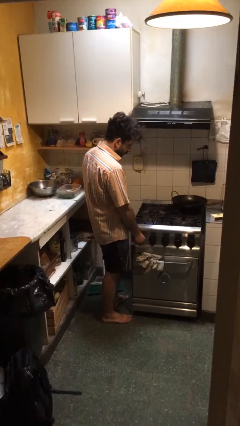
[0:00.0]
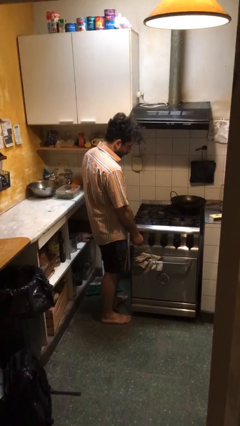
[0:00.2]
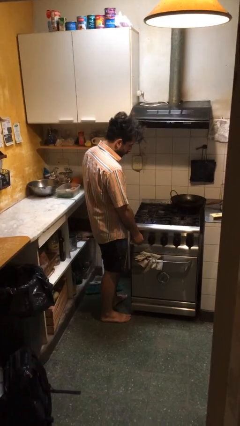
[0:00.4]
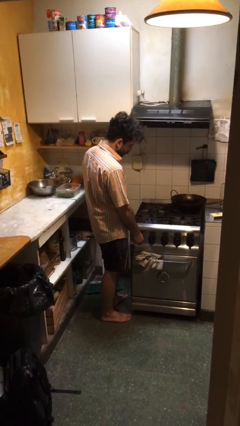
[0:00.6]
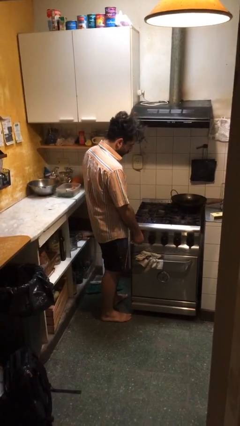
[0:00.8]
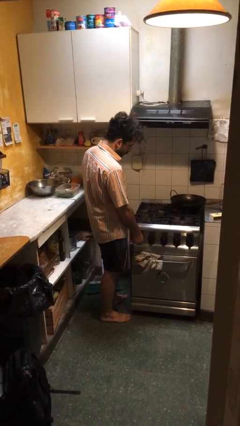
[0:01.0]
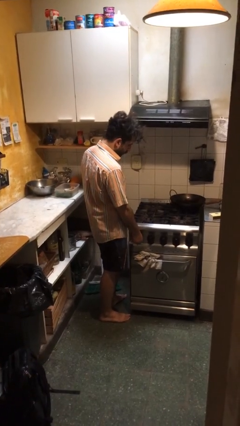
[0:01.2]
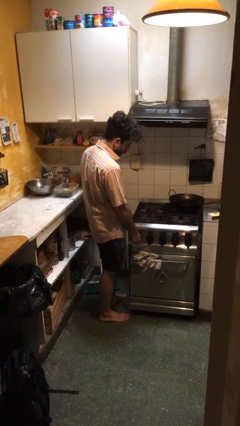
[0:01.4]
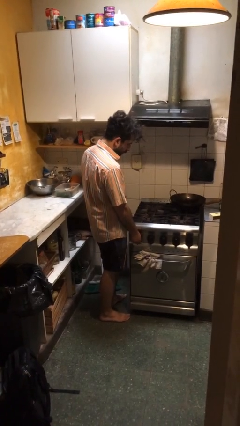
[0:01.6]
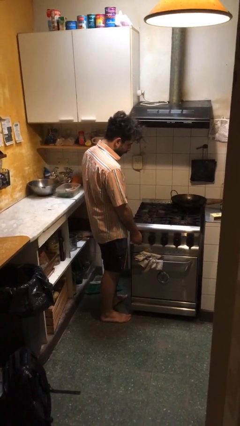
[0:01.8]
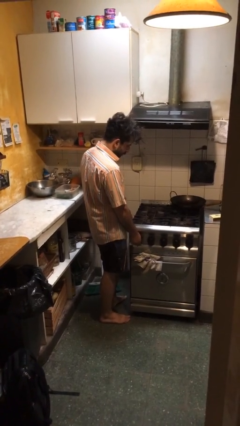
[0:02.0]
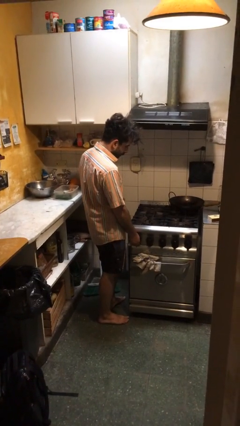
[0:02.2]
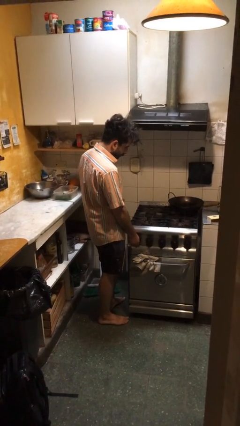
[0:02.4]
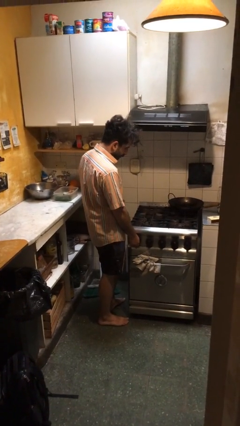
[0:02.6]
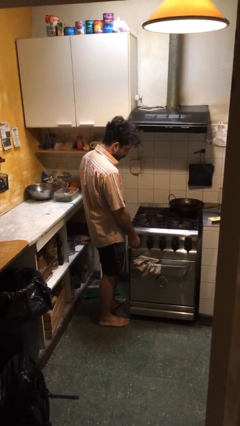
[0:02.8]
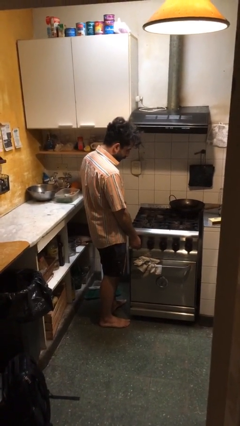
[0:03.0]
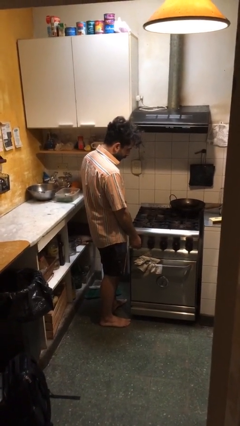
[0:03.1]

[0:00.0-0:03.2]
person turns off stovetop

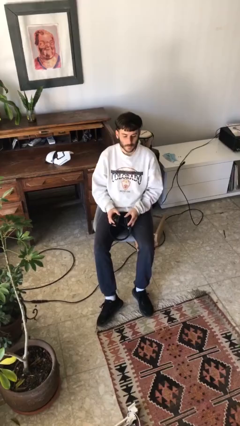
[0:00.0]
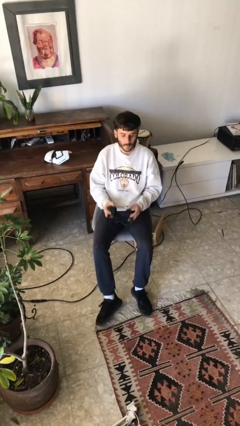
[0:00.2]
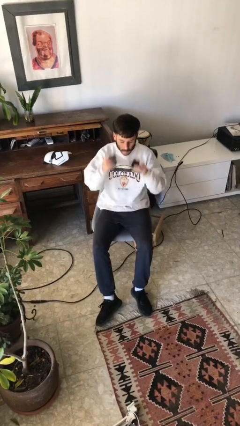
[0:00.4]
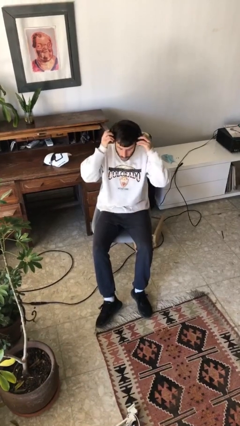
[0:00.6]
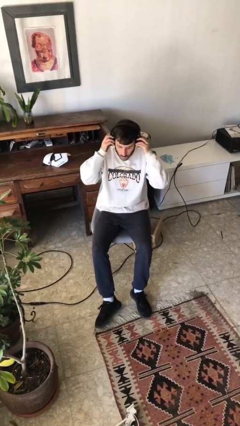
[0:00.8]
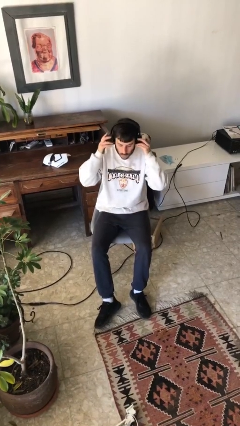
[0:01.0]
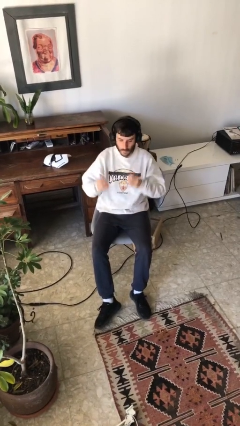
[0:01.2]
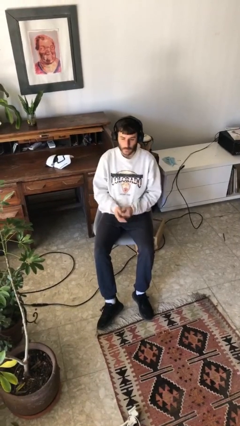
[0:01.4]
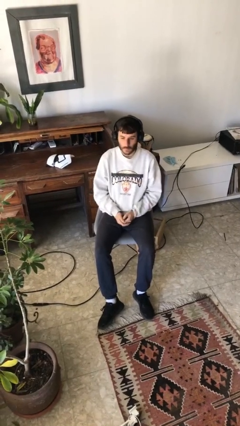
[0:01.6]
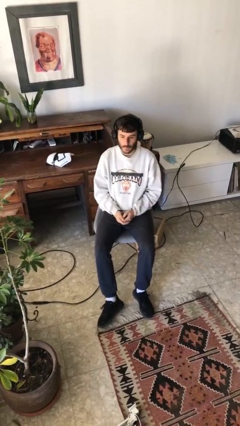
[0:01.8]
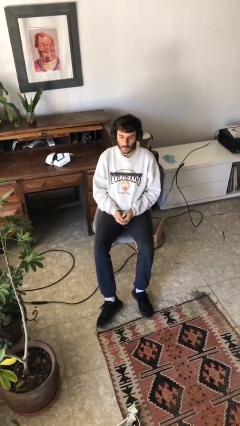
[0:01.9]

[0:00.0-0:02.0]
person puts on headphones

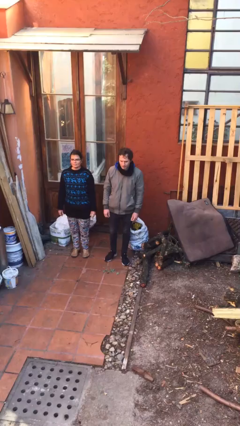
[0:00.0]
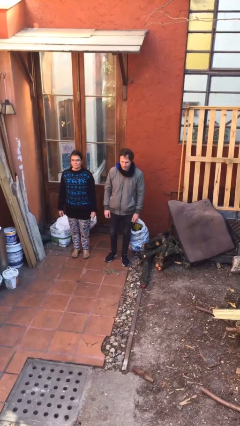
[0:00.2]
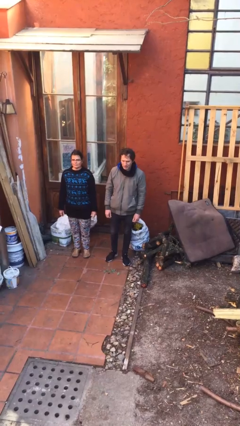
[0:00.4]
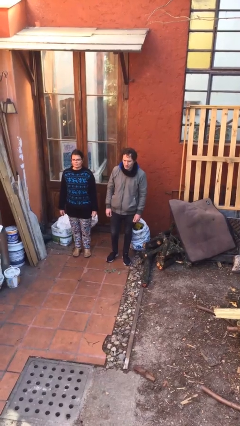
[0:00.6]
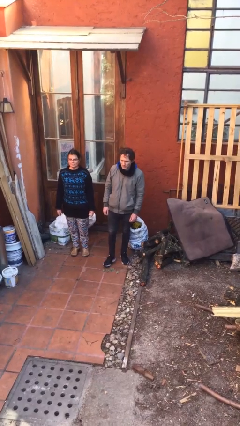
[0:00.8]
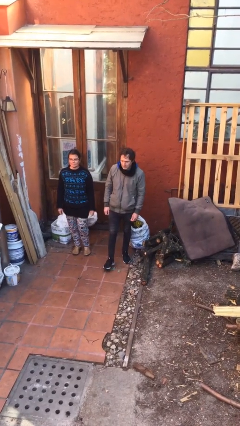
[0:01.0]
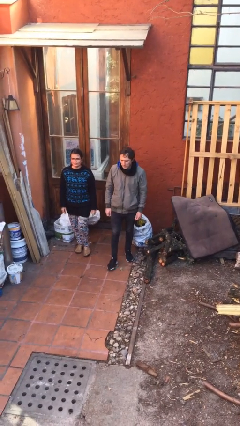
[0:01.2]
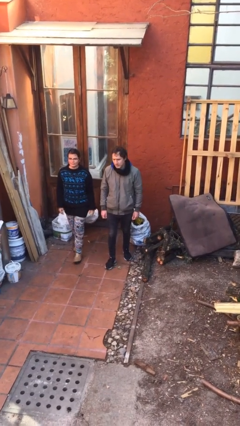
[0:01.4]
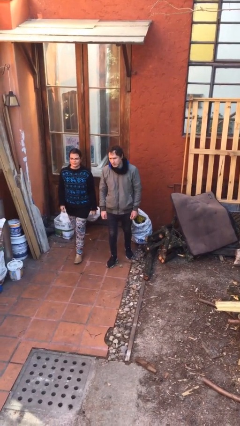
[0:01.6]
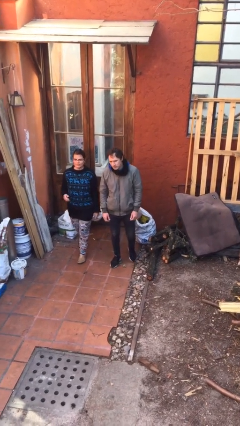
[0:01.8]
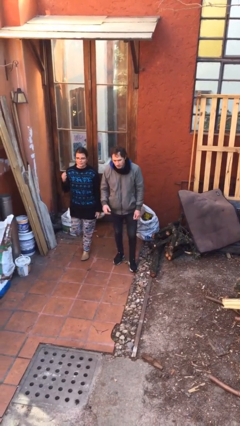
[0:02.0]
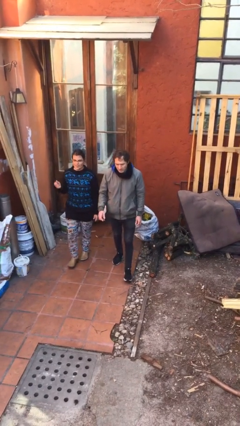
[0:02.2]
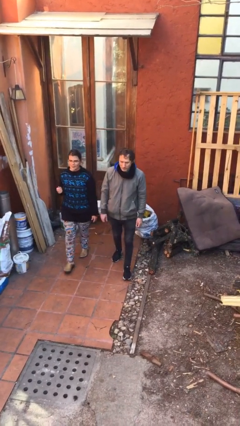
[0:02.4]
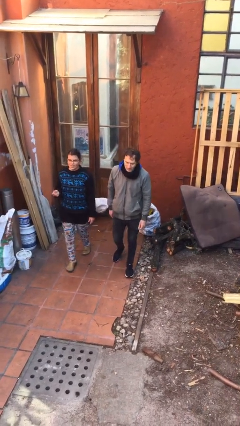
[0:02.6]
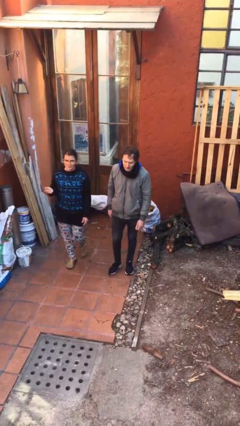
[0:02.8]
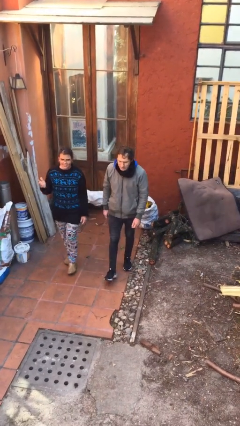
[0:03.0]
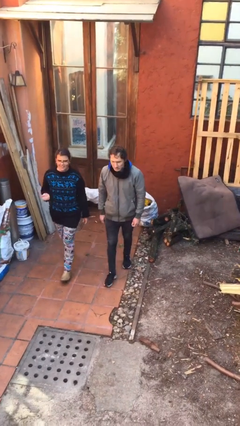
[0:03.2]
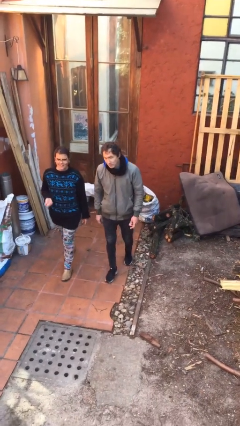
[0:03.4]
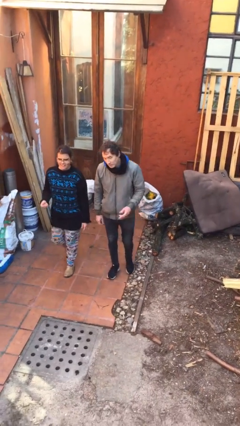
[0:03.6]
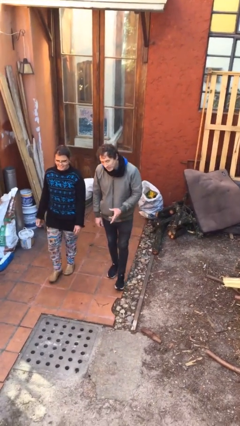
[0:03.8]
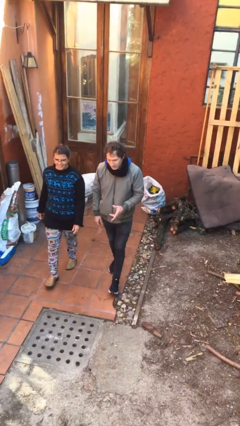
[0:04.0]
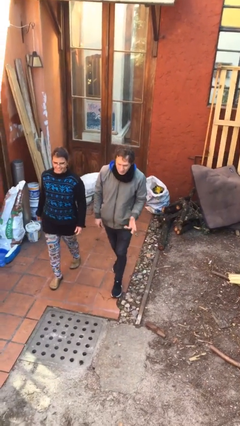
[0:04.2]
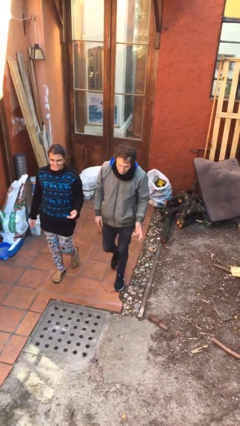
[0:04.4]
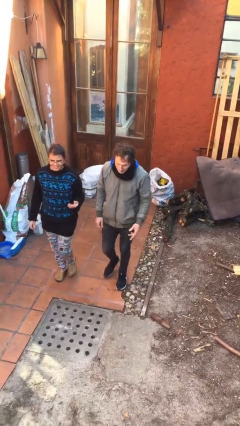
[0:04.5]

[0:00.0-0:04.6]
person talks to person

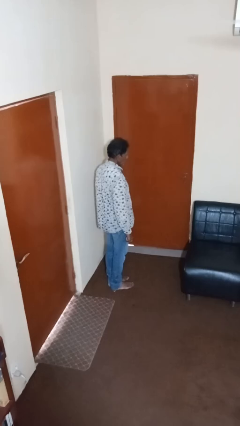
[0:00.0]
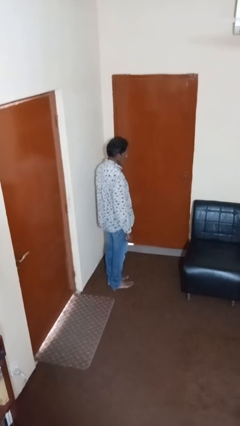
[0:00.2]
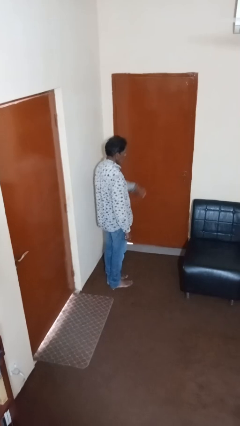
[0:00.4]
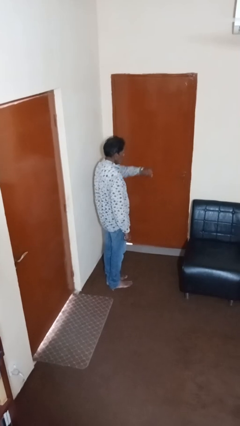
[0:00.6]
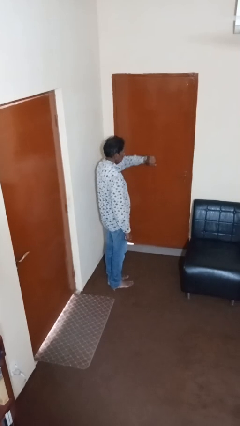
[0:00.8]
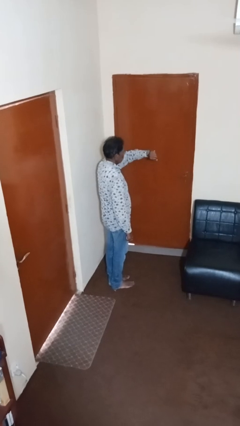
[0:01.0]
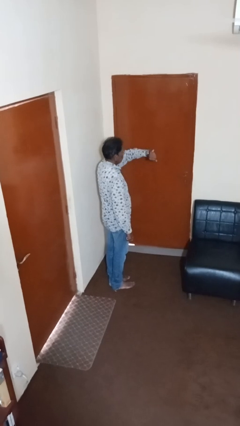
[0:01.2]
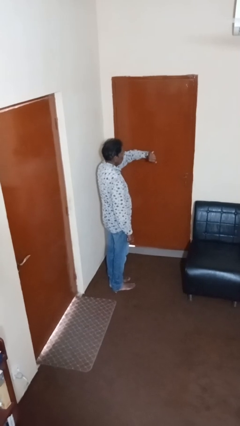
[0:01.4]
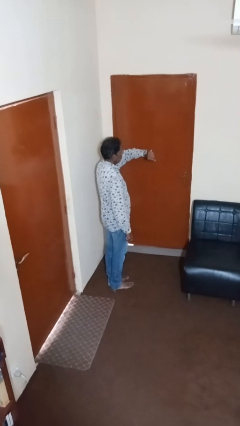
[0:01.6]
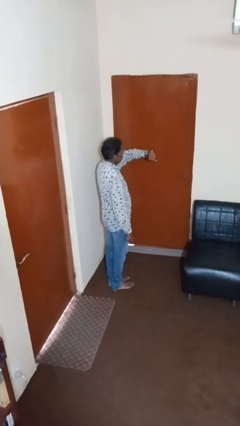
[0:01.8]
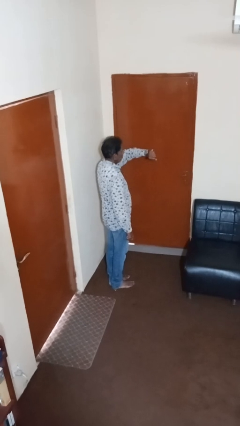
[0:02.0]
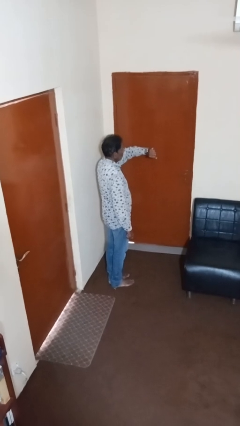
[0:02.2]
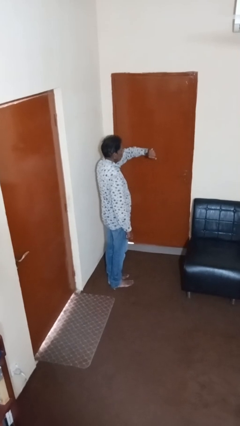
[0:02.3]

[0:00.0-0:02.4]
person looks at wristwatch

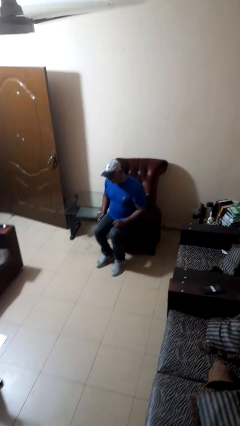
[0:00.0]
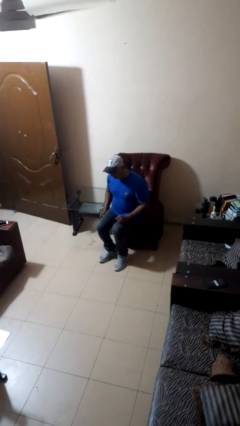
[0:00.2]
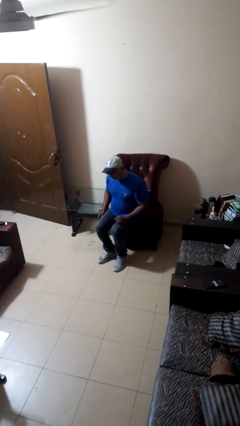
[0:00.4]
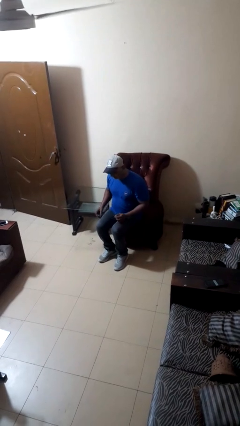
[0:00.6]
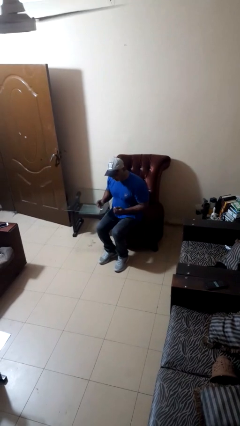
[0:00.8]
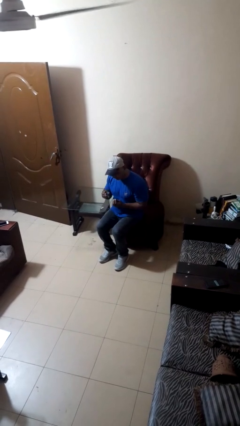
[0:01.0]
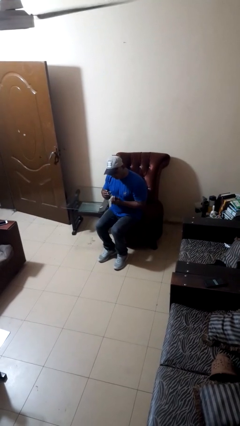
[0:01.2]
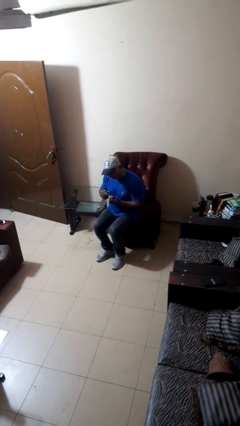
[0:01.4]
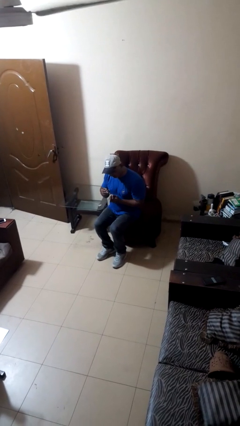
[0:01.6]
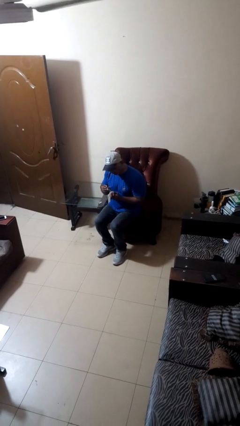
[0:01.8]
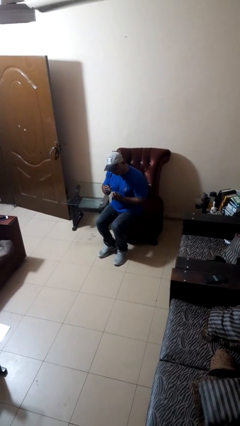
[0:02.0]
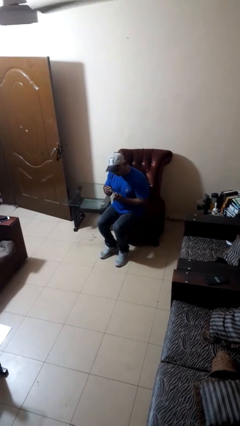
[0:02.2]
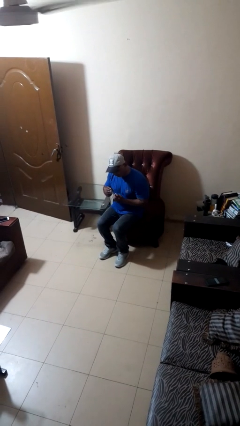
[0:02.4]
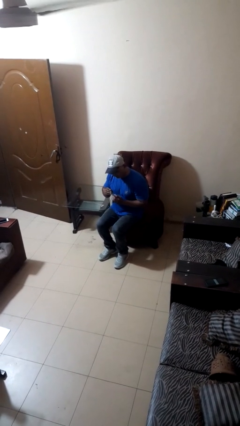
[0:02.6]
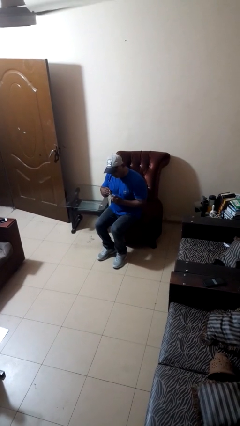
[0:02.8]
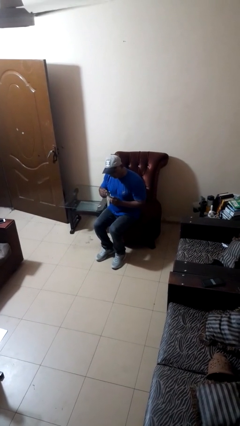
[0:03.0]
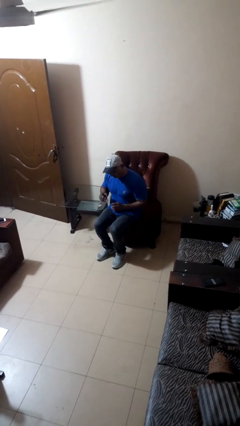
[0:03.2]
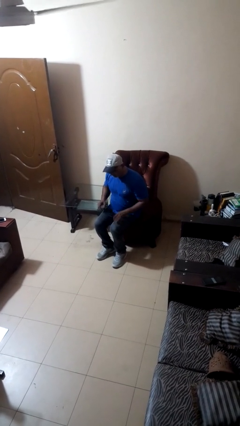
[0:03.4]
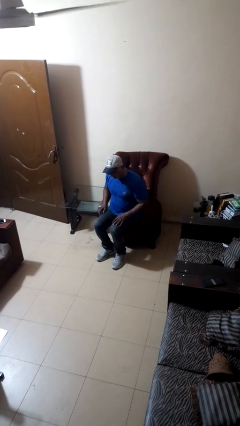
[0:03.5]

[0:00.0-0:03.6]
person clips fingernails

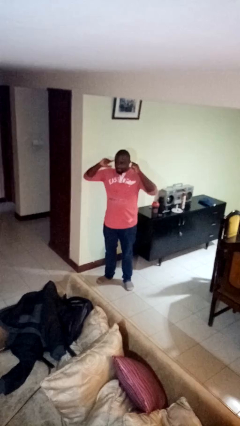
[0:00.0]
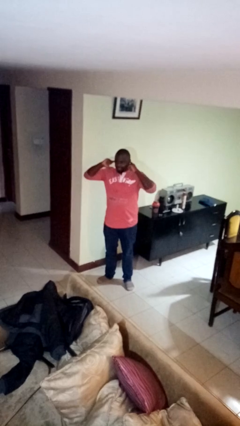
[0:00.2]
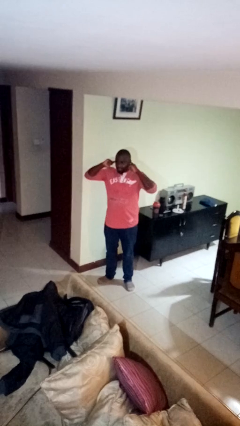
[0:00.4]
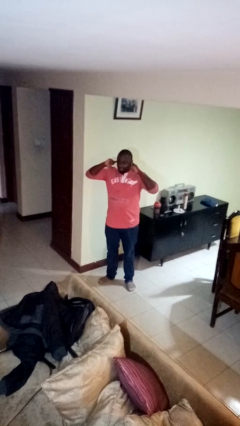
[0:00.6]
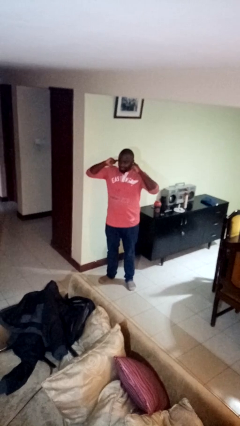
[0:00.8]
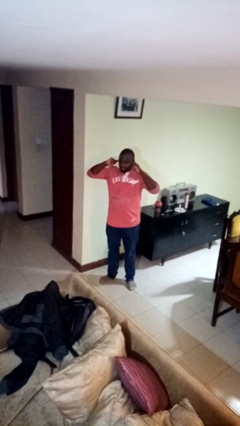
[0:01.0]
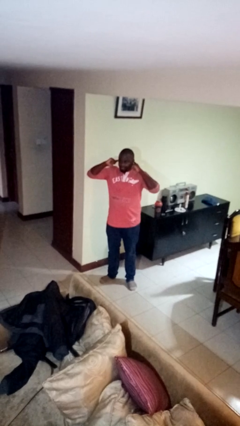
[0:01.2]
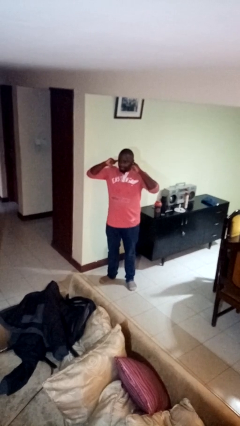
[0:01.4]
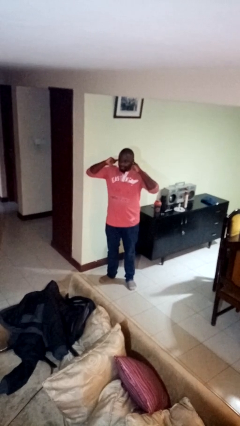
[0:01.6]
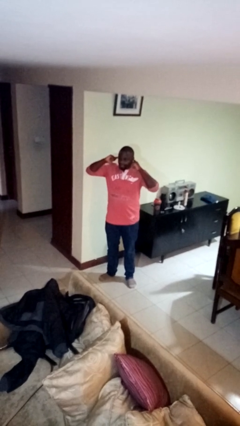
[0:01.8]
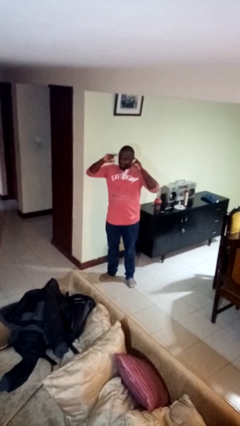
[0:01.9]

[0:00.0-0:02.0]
person puts fingers in ear
